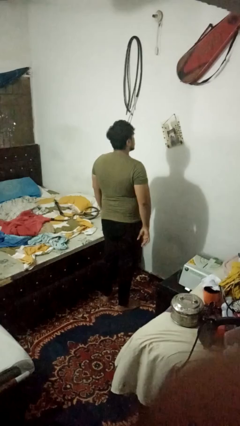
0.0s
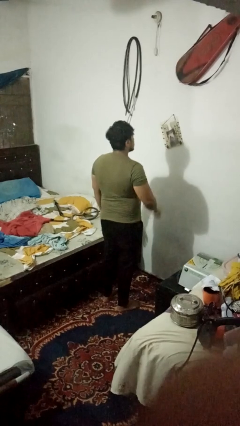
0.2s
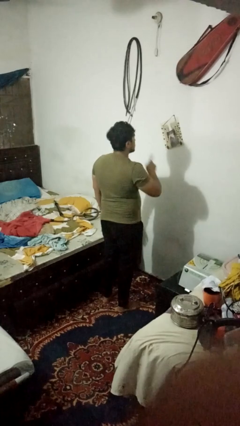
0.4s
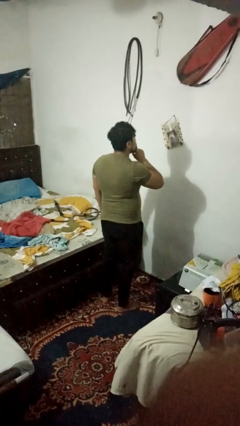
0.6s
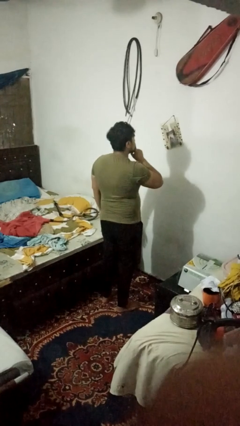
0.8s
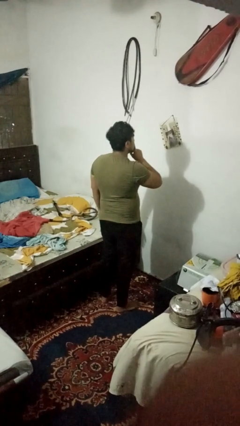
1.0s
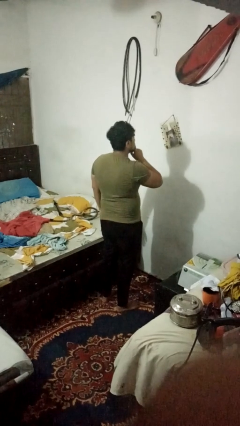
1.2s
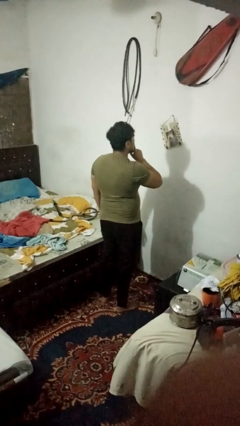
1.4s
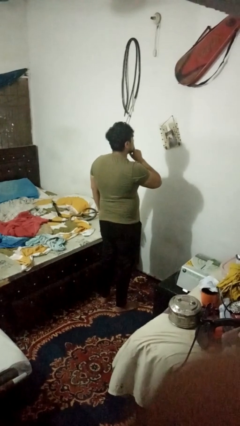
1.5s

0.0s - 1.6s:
person gestures be quiet

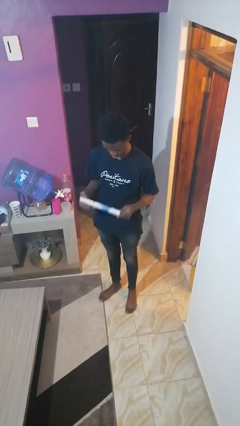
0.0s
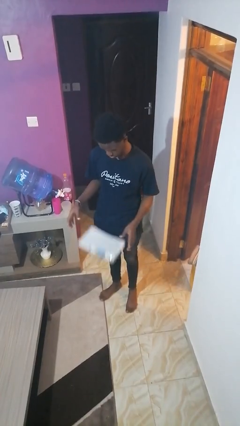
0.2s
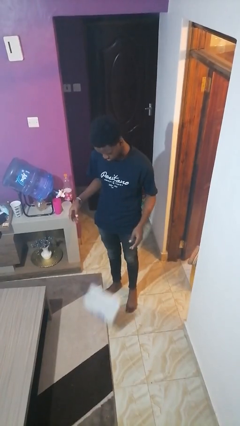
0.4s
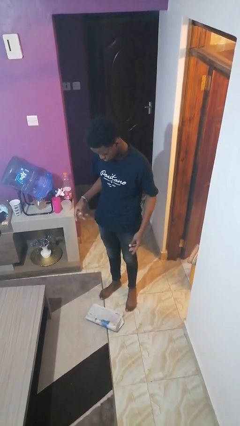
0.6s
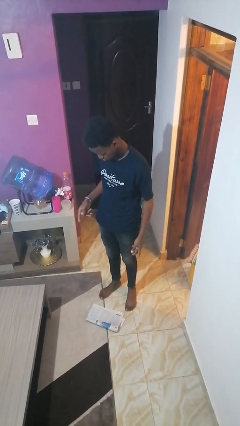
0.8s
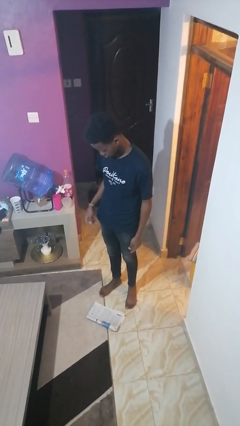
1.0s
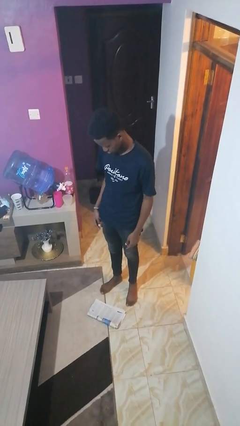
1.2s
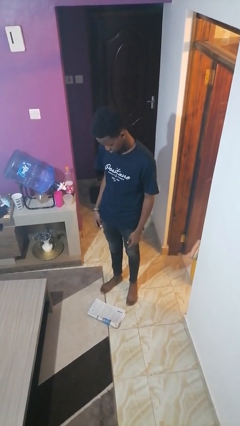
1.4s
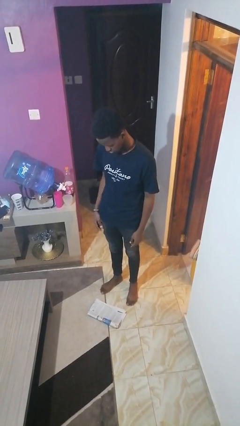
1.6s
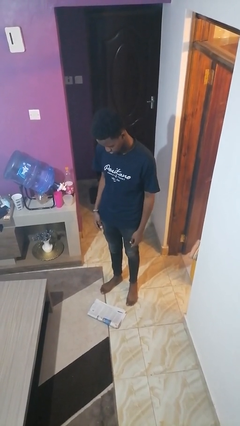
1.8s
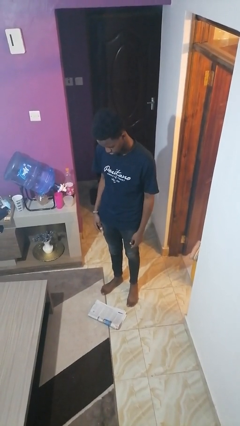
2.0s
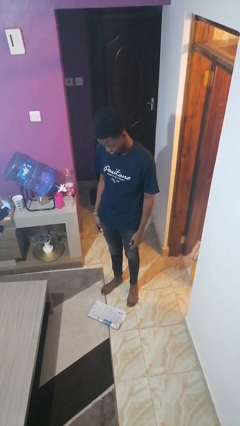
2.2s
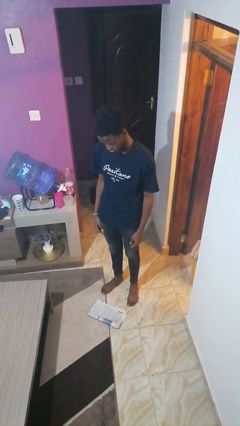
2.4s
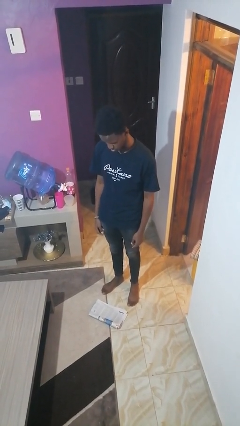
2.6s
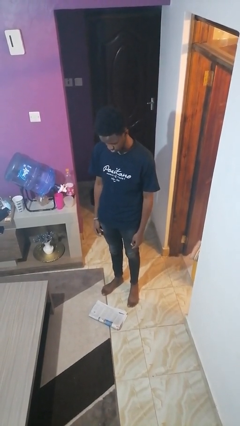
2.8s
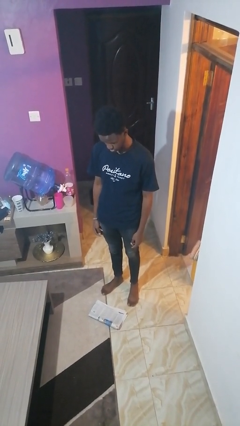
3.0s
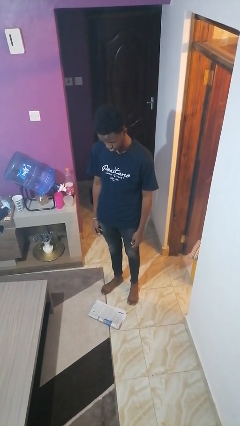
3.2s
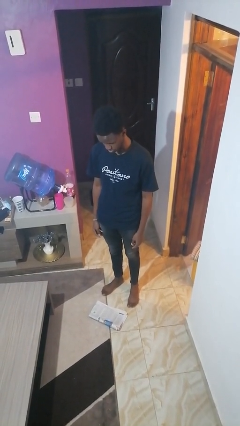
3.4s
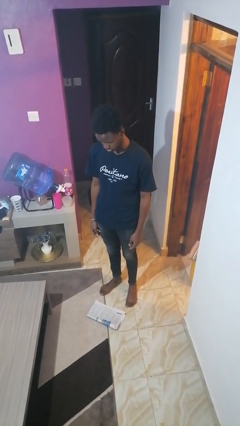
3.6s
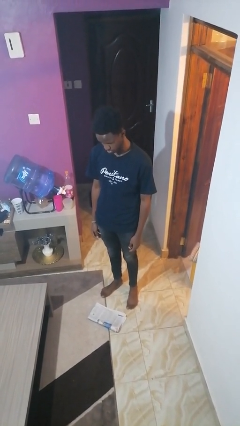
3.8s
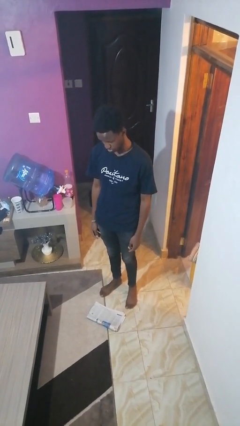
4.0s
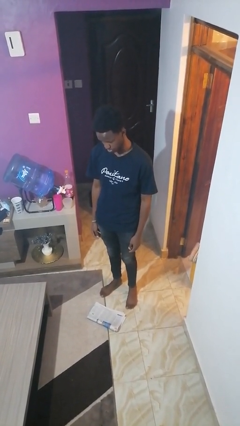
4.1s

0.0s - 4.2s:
person drops object

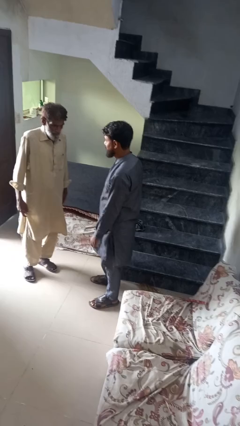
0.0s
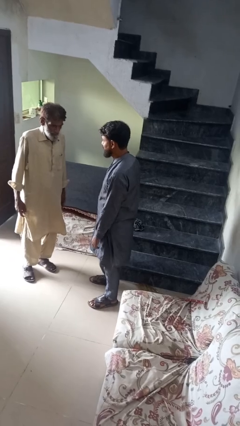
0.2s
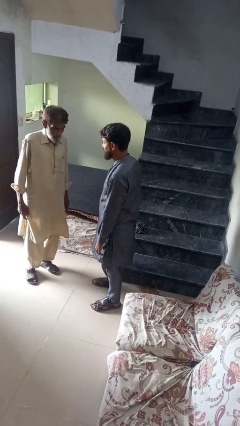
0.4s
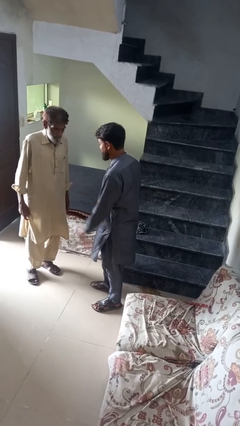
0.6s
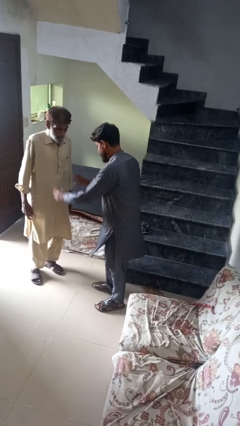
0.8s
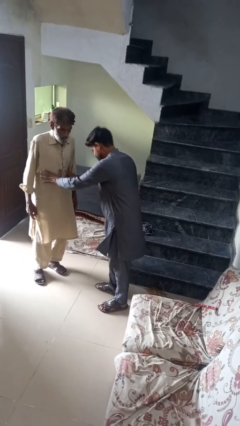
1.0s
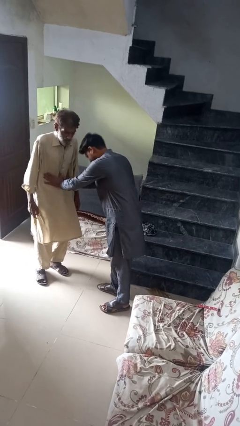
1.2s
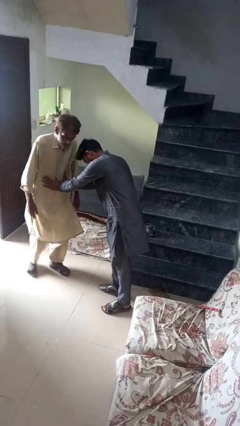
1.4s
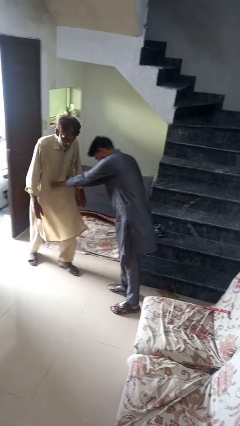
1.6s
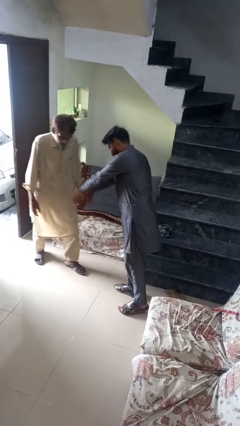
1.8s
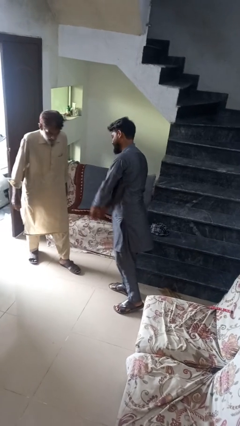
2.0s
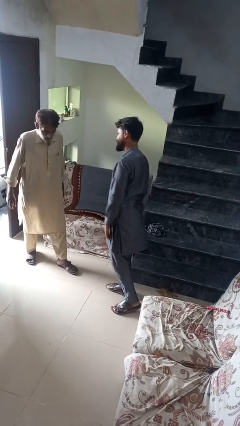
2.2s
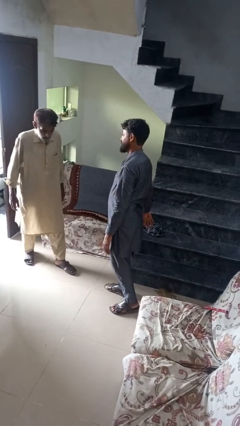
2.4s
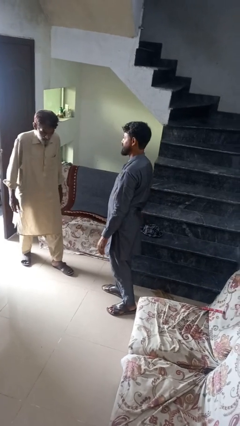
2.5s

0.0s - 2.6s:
person shoves person

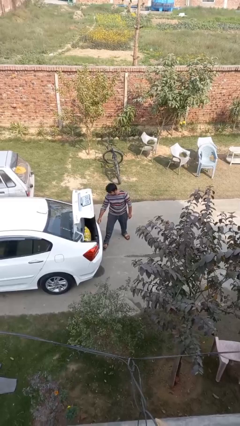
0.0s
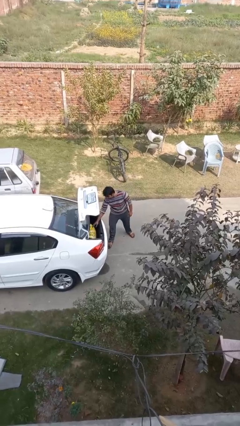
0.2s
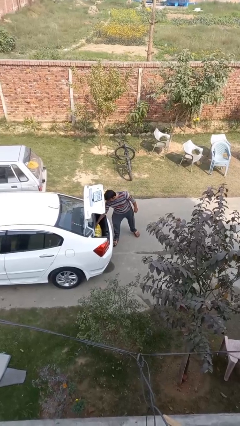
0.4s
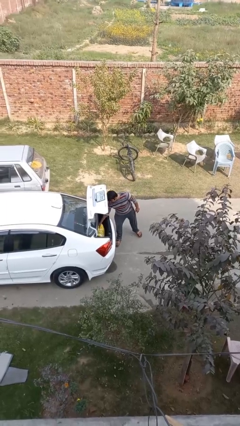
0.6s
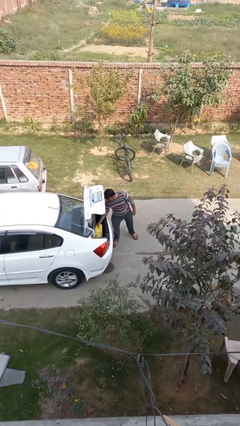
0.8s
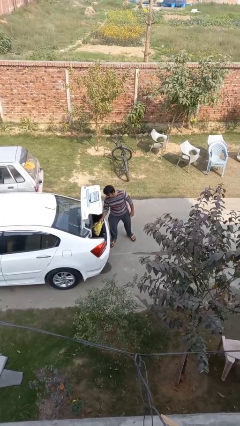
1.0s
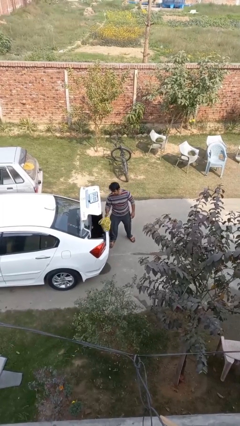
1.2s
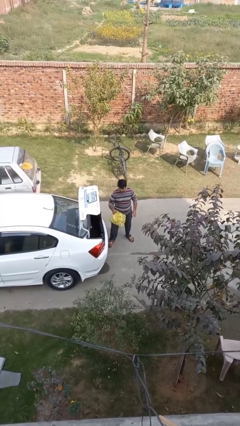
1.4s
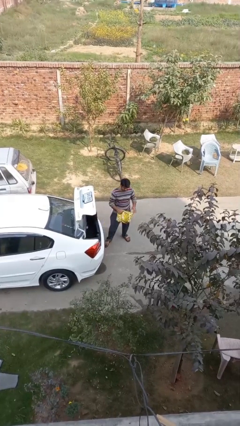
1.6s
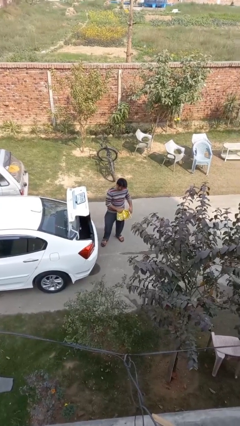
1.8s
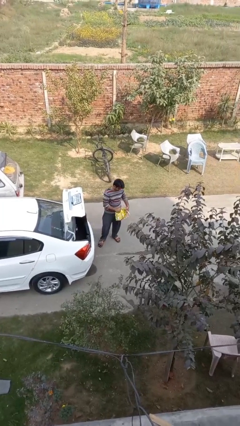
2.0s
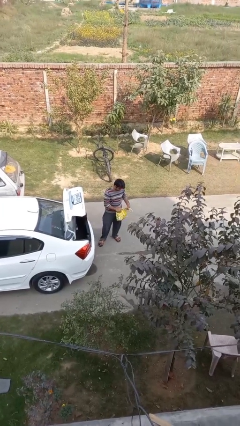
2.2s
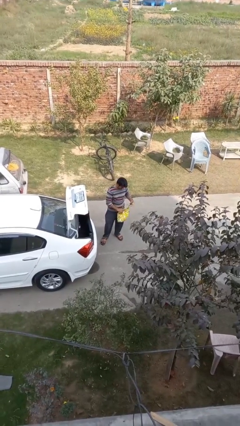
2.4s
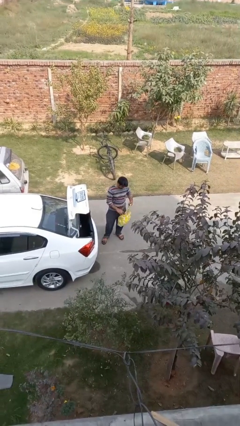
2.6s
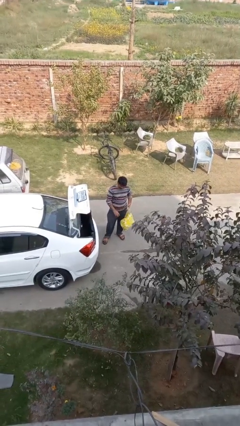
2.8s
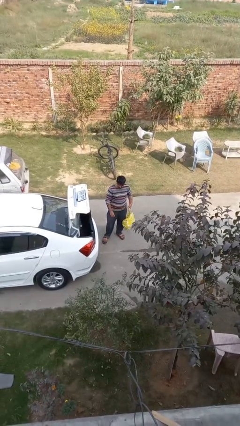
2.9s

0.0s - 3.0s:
person unloads car

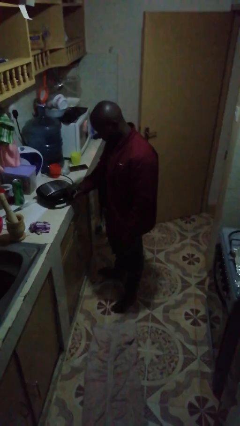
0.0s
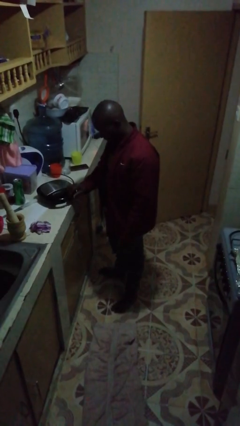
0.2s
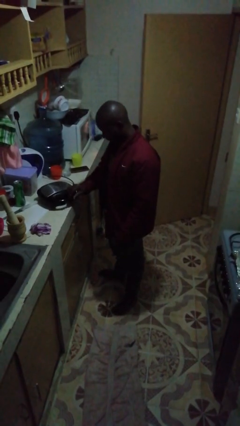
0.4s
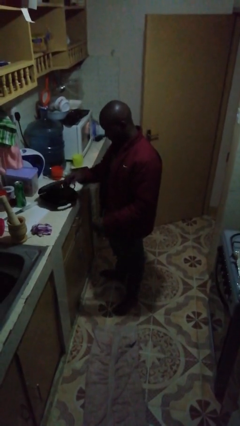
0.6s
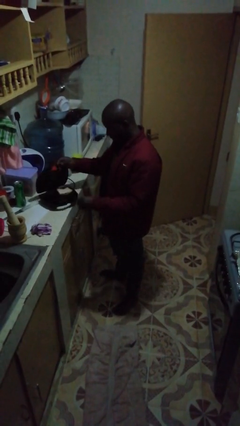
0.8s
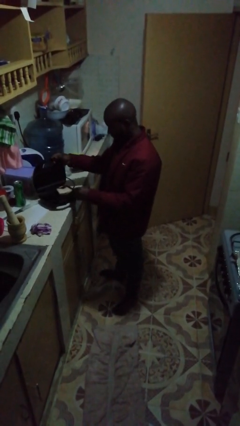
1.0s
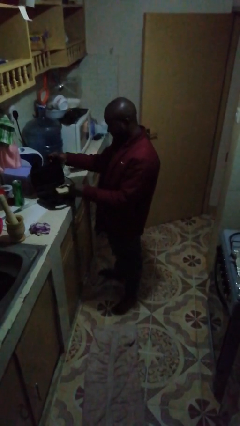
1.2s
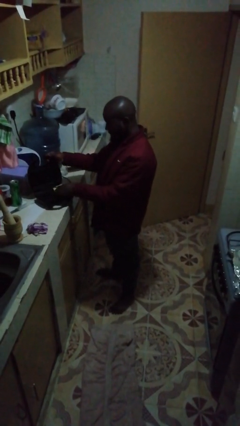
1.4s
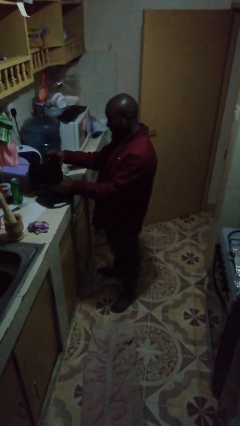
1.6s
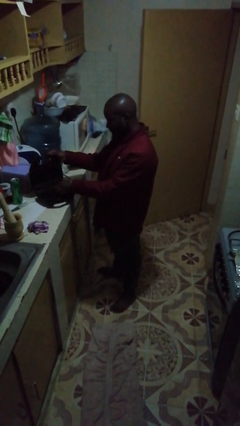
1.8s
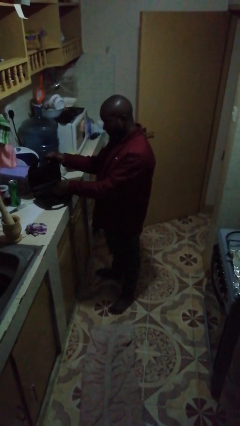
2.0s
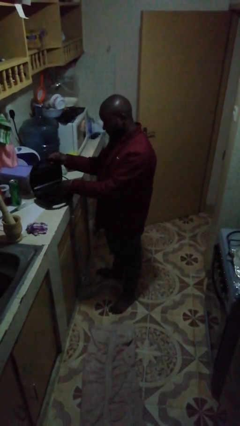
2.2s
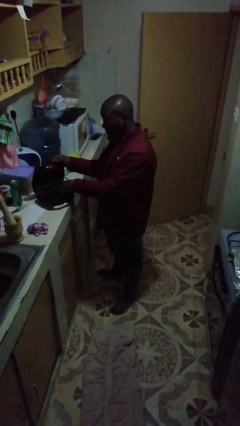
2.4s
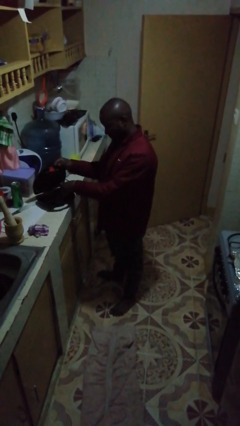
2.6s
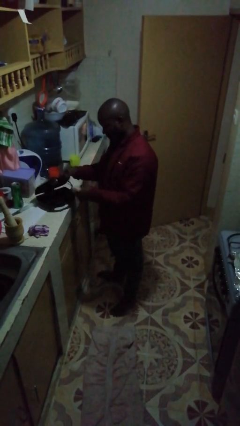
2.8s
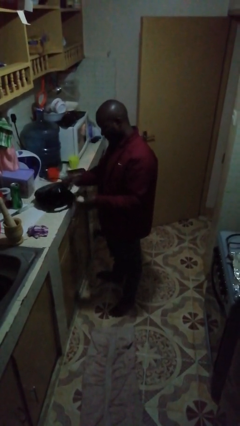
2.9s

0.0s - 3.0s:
person takes object from toaster

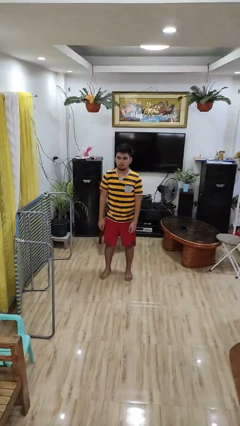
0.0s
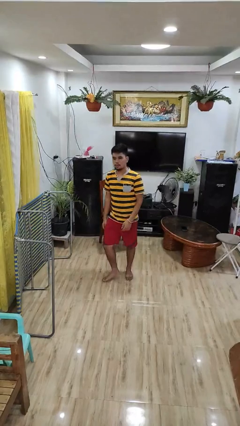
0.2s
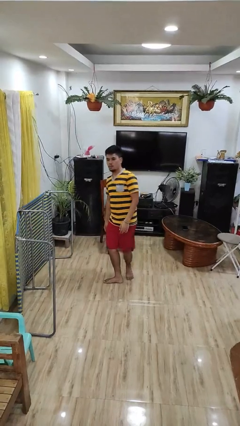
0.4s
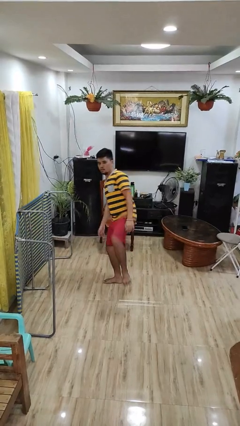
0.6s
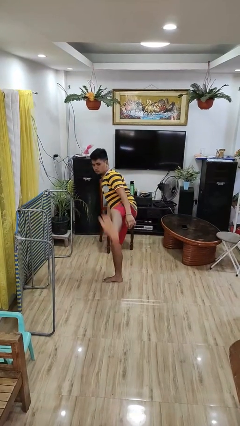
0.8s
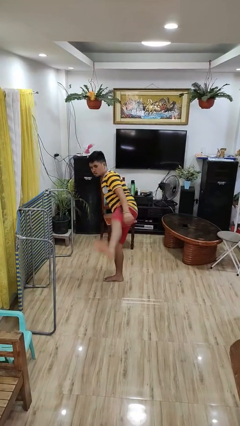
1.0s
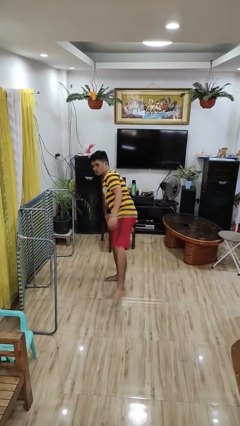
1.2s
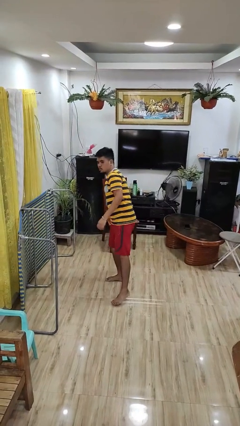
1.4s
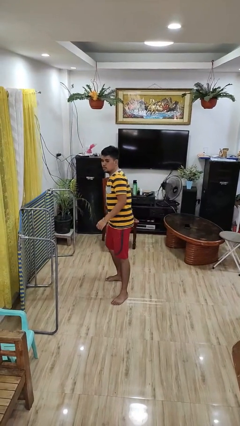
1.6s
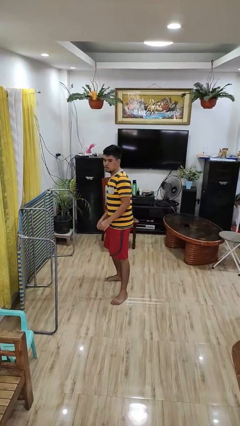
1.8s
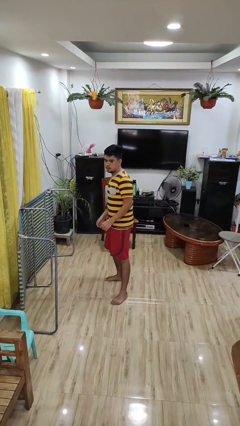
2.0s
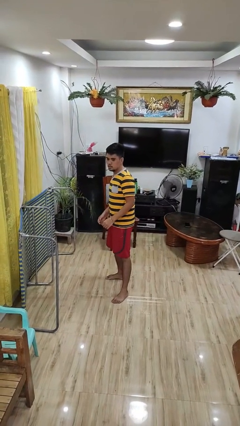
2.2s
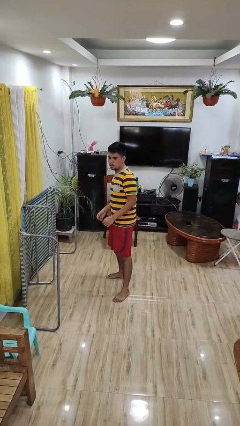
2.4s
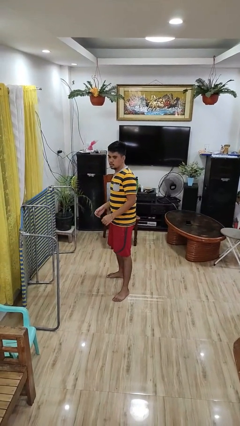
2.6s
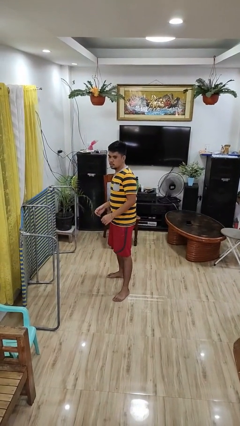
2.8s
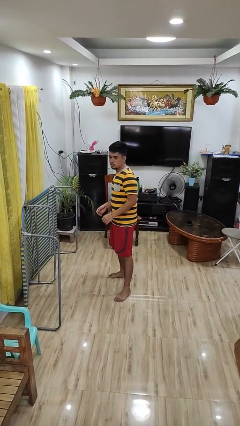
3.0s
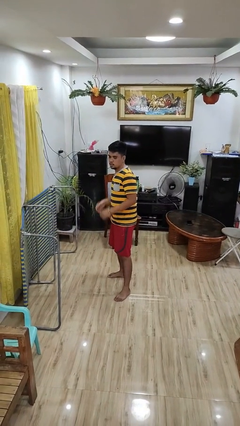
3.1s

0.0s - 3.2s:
person karate kicks
